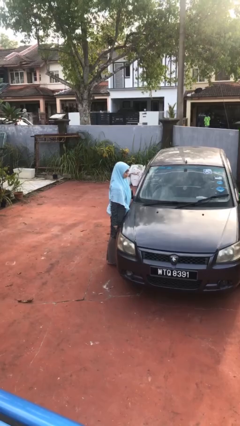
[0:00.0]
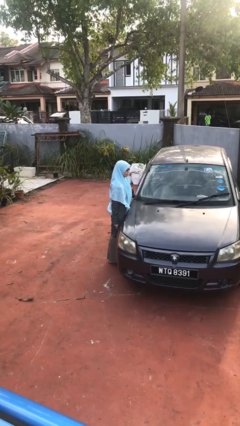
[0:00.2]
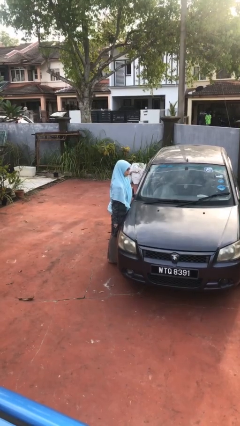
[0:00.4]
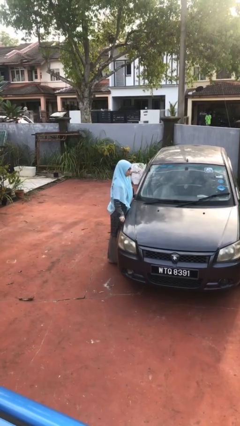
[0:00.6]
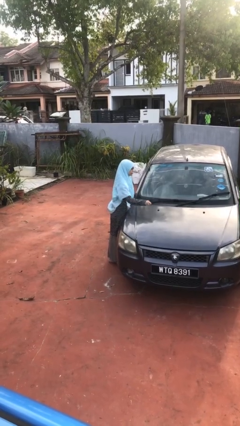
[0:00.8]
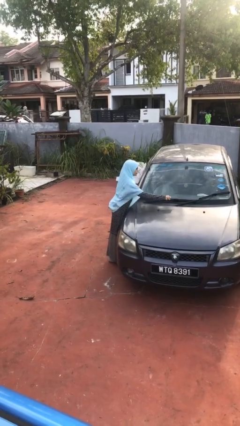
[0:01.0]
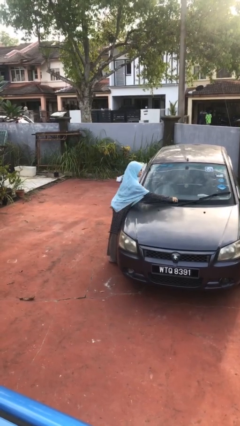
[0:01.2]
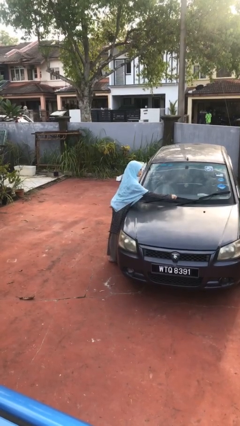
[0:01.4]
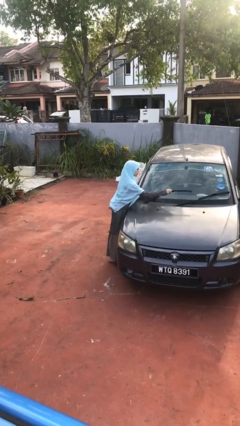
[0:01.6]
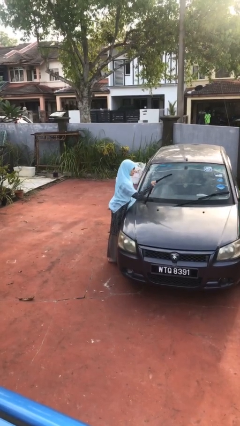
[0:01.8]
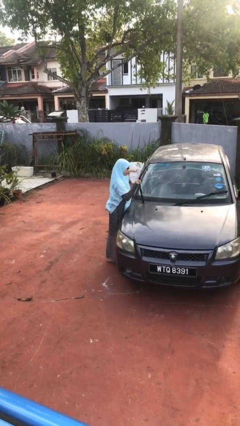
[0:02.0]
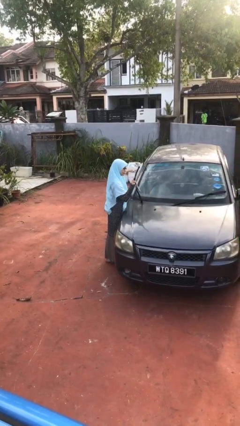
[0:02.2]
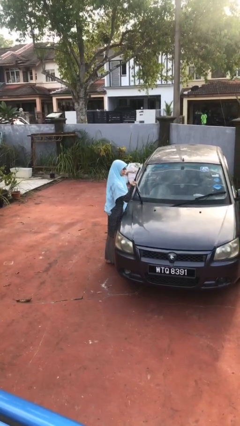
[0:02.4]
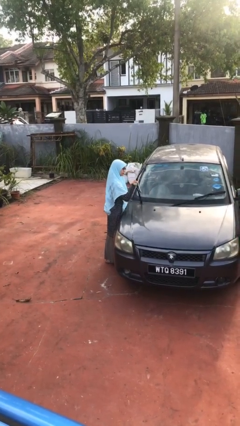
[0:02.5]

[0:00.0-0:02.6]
person flips up car wipers

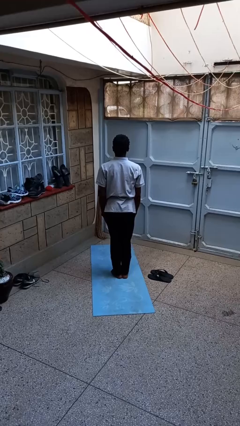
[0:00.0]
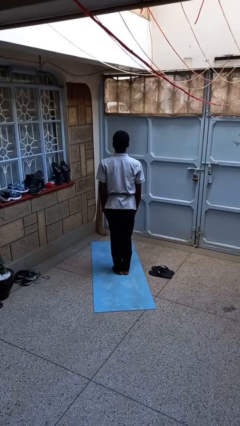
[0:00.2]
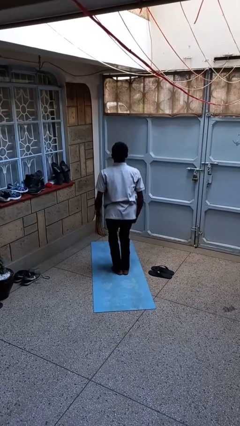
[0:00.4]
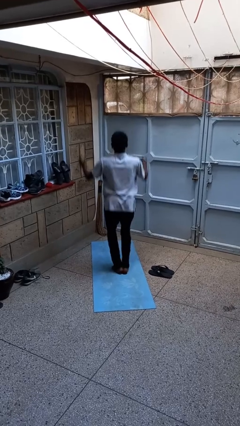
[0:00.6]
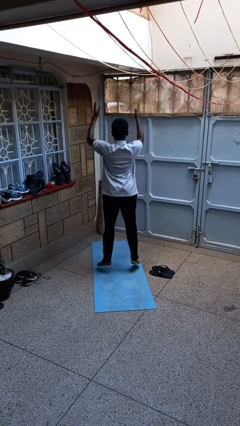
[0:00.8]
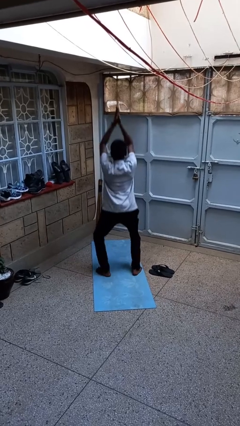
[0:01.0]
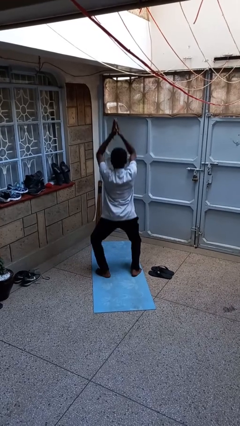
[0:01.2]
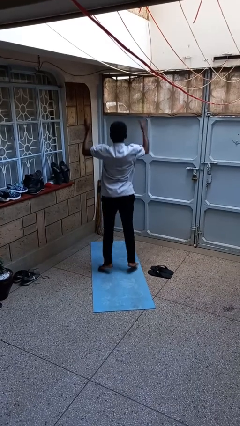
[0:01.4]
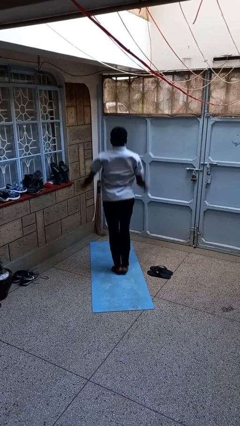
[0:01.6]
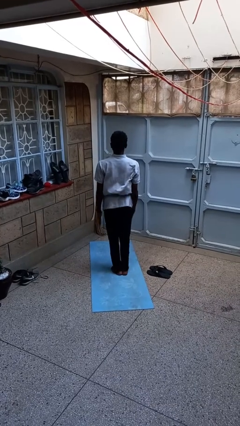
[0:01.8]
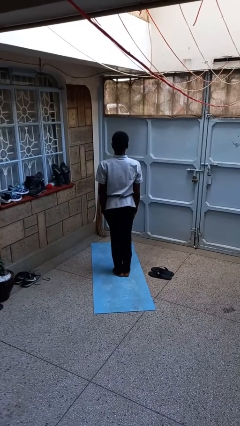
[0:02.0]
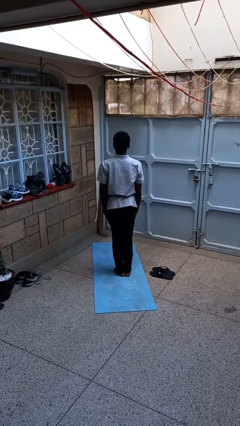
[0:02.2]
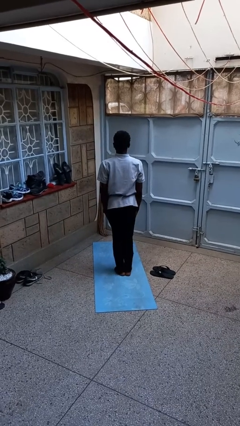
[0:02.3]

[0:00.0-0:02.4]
person exercises with jumping jacks

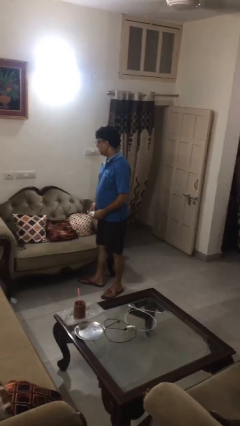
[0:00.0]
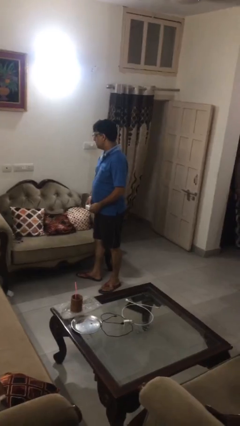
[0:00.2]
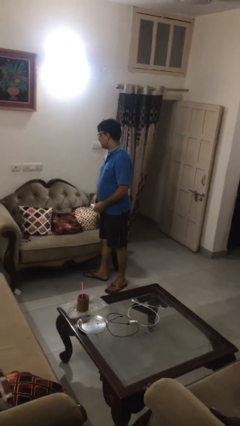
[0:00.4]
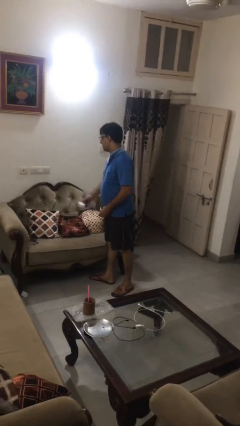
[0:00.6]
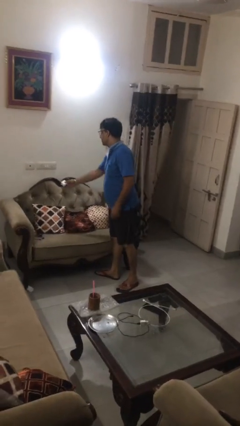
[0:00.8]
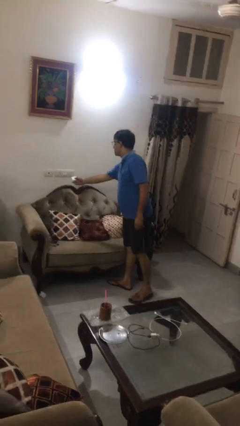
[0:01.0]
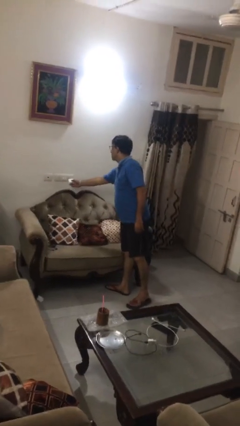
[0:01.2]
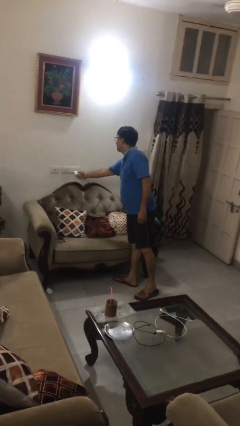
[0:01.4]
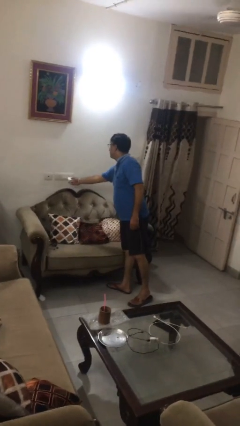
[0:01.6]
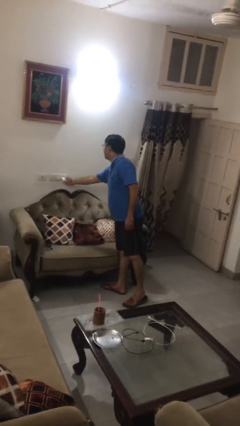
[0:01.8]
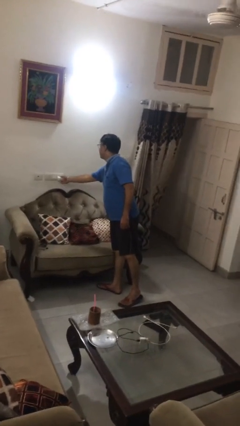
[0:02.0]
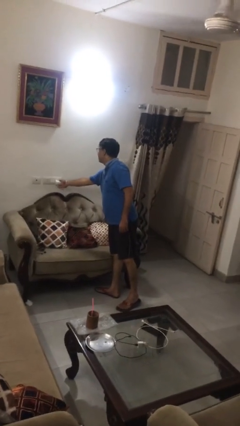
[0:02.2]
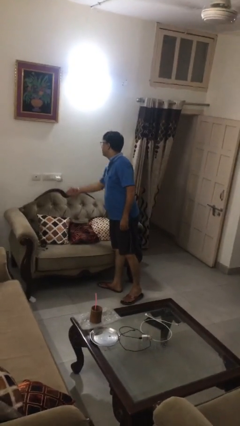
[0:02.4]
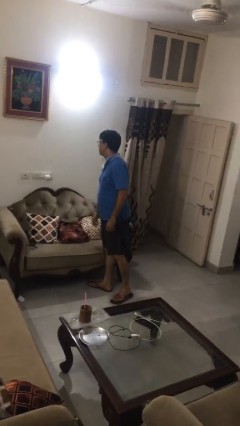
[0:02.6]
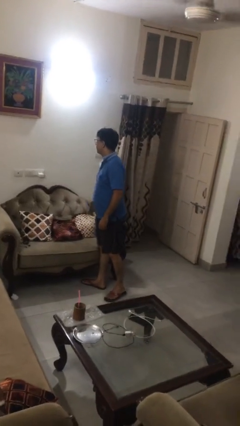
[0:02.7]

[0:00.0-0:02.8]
person plugs into electrical socket

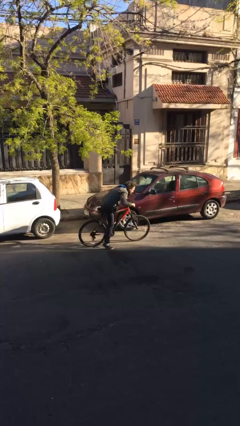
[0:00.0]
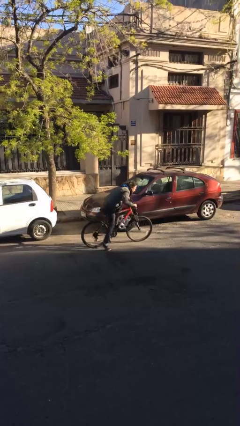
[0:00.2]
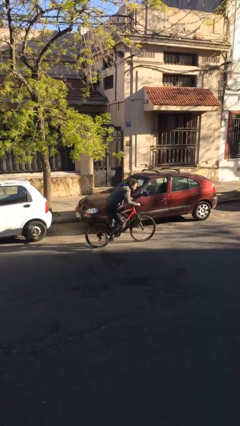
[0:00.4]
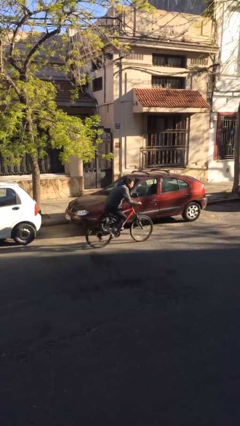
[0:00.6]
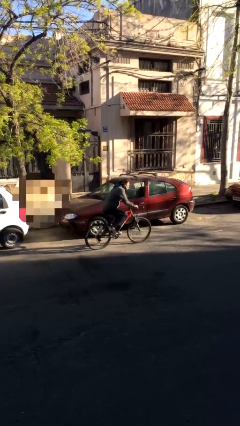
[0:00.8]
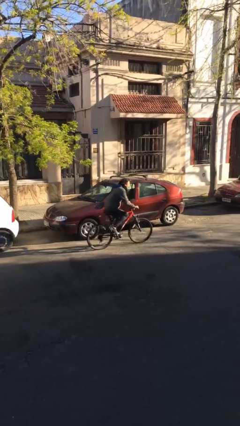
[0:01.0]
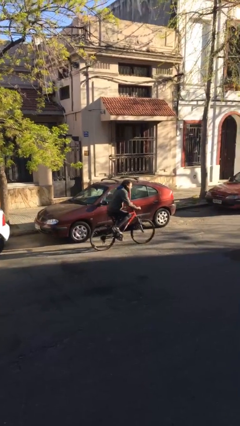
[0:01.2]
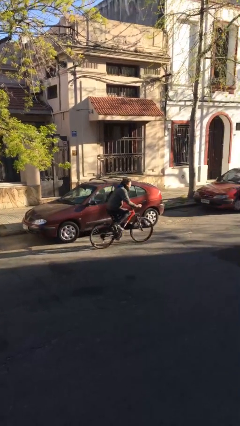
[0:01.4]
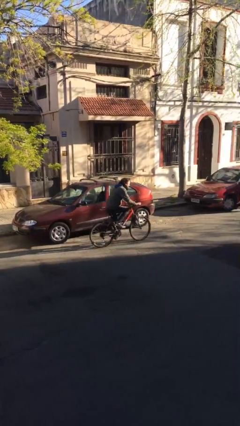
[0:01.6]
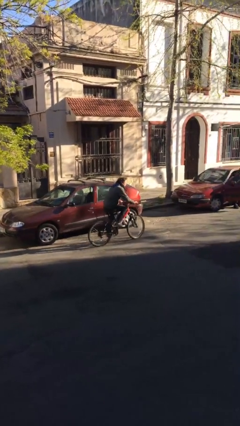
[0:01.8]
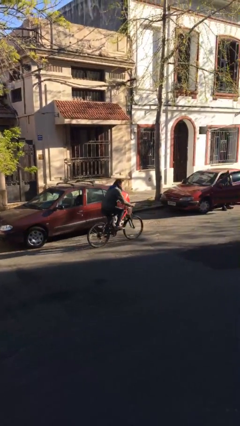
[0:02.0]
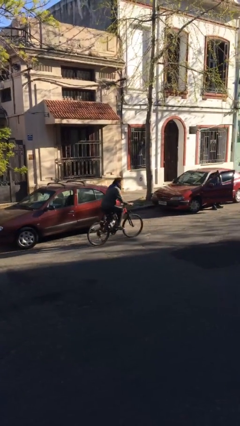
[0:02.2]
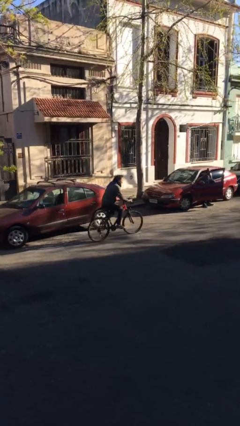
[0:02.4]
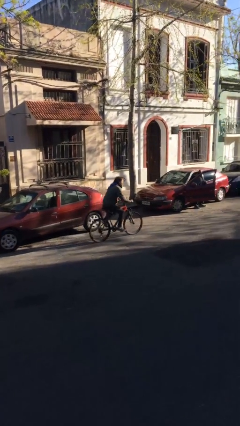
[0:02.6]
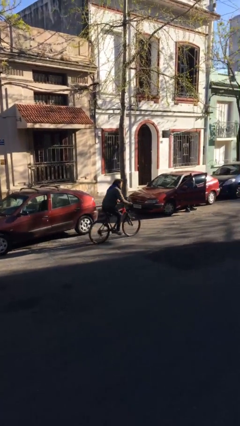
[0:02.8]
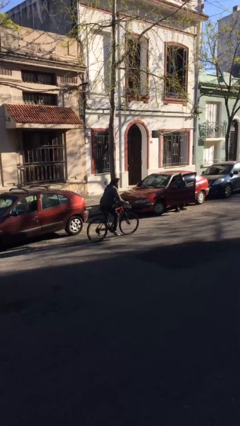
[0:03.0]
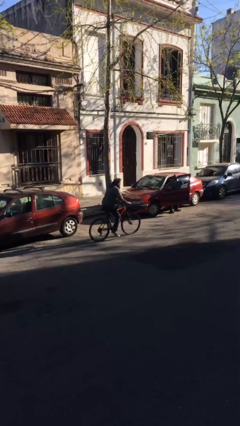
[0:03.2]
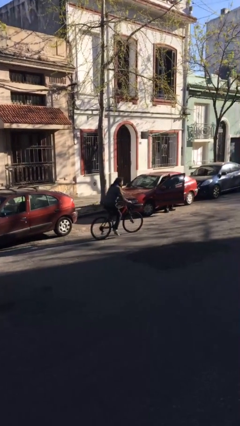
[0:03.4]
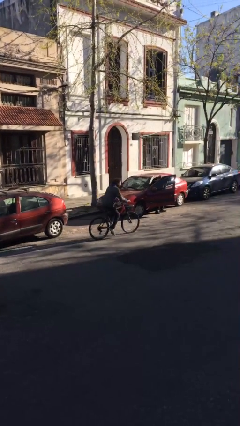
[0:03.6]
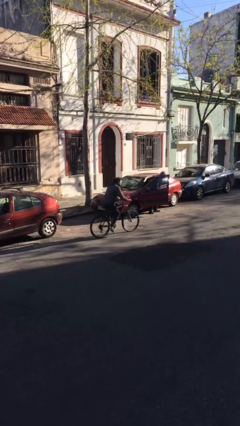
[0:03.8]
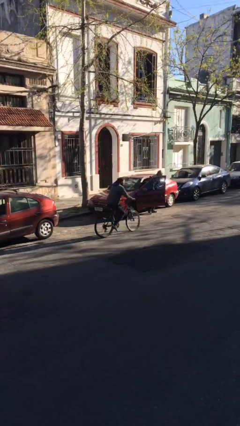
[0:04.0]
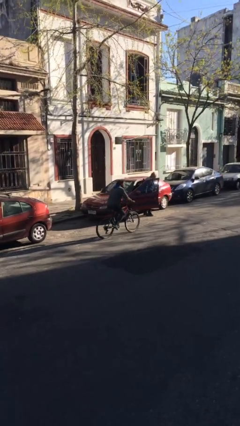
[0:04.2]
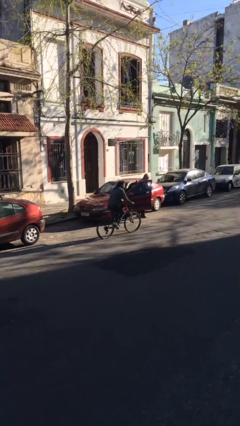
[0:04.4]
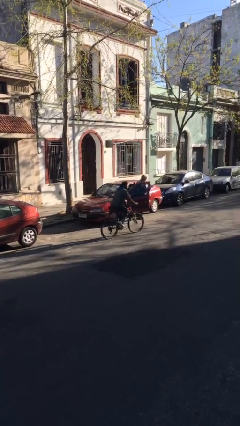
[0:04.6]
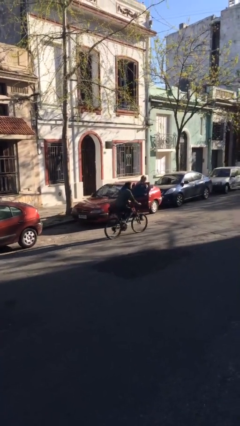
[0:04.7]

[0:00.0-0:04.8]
person rides bicycle

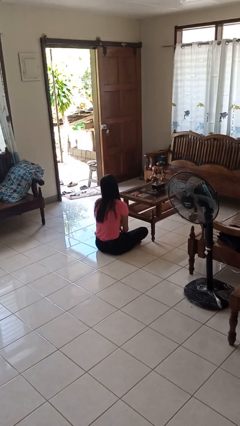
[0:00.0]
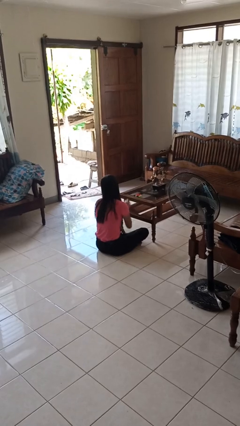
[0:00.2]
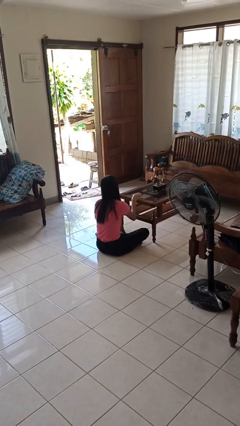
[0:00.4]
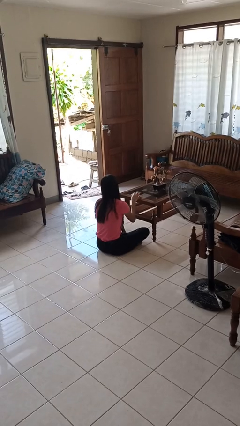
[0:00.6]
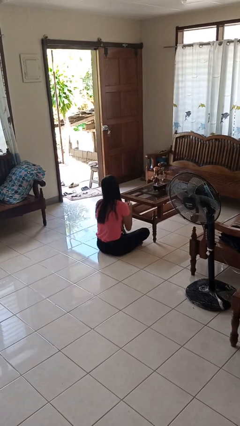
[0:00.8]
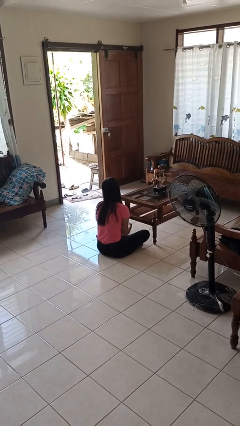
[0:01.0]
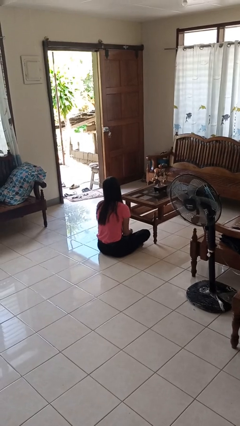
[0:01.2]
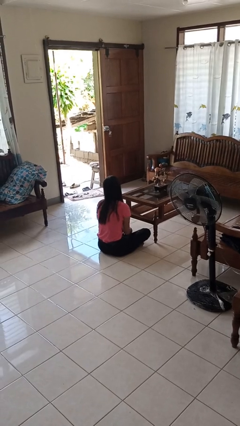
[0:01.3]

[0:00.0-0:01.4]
person picks up object from table

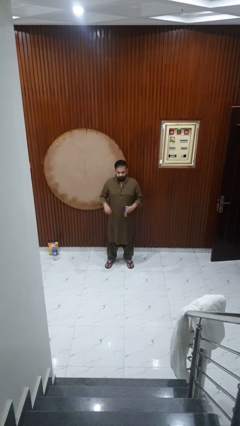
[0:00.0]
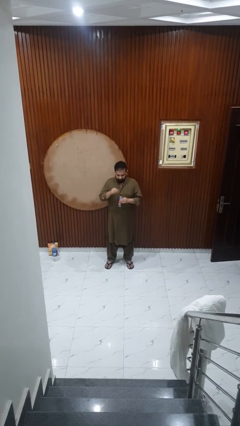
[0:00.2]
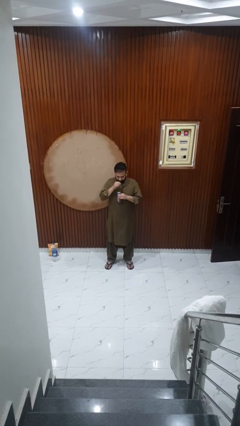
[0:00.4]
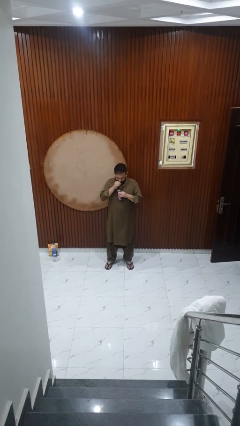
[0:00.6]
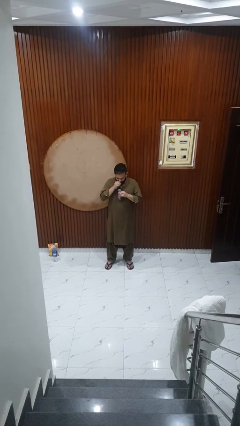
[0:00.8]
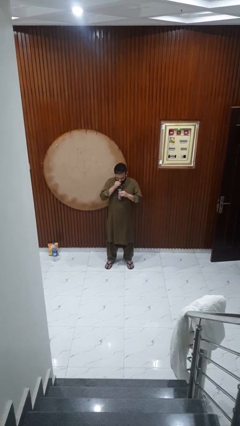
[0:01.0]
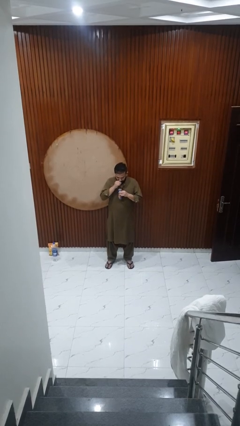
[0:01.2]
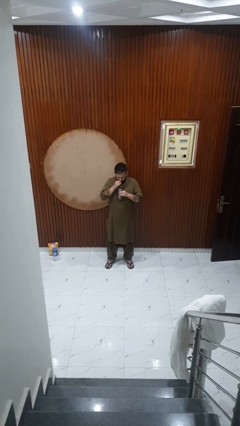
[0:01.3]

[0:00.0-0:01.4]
person drinks from straw

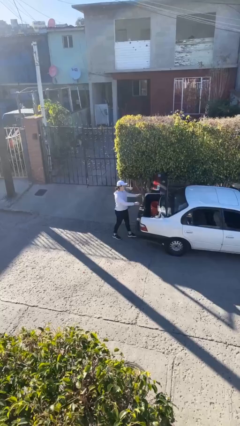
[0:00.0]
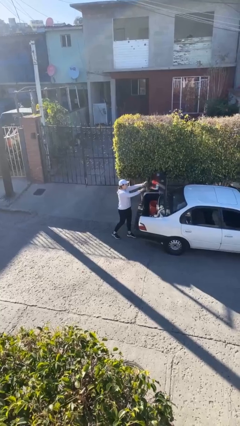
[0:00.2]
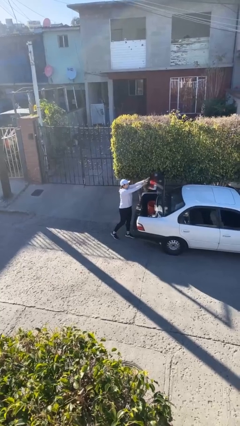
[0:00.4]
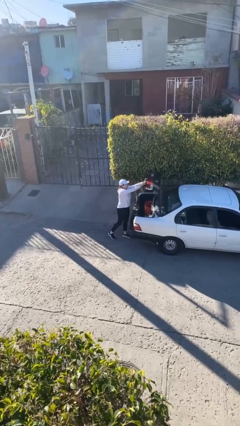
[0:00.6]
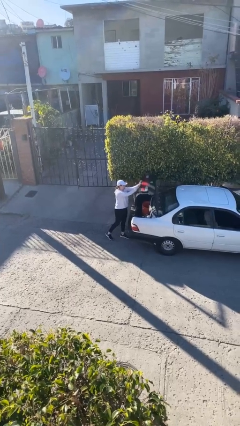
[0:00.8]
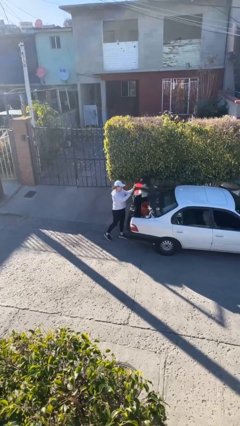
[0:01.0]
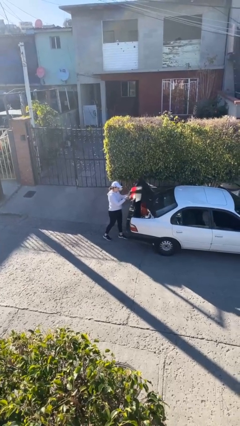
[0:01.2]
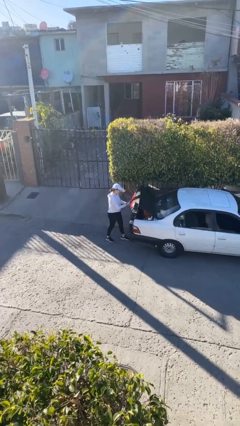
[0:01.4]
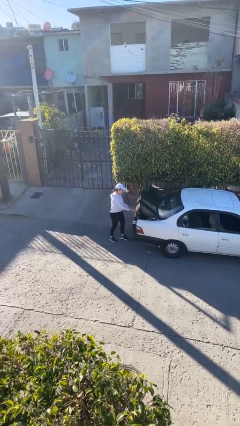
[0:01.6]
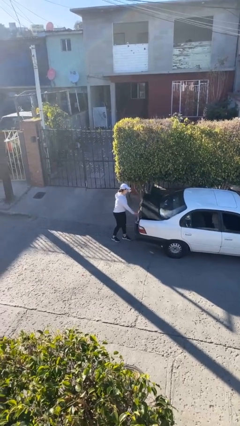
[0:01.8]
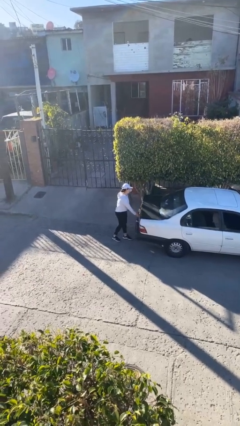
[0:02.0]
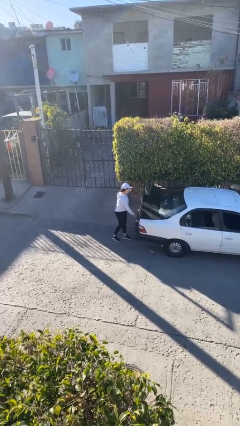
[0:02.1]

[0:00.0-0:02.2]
person closes car trunk
